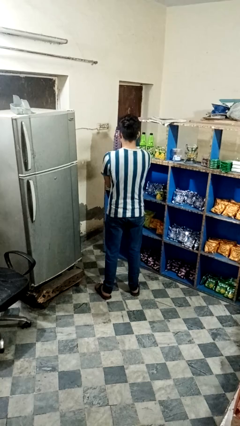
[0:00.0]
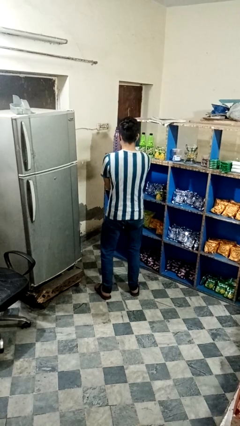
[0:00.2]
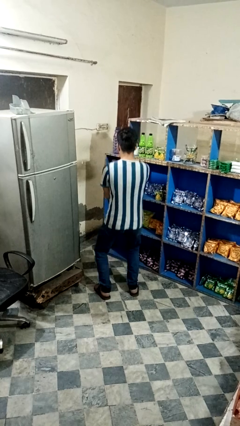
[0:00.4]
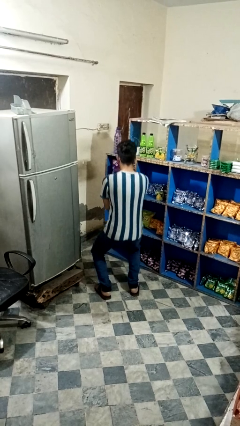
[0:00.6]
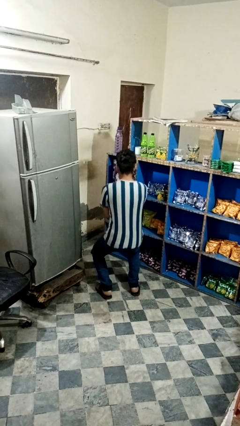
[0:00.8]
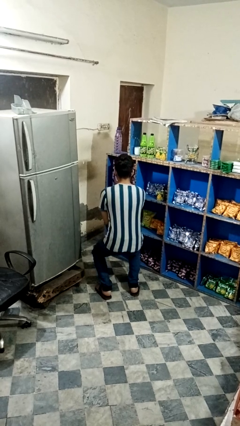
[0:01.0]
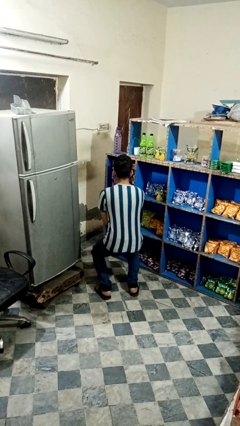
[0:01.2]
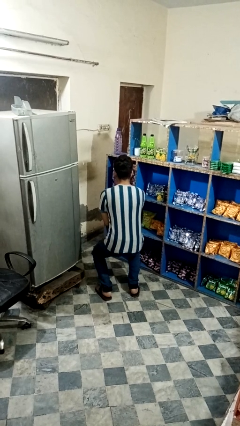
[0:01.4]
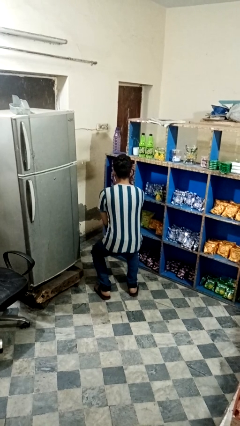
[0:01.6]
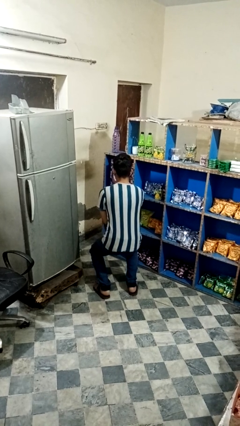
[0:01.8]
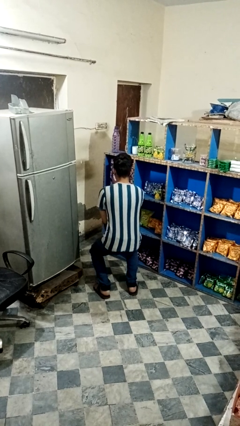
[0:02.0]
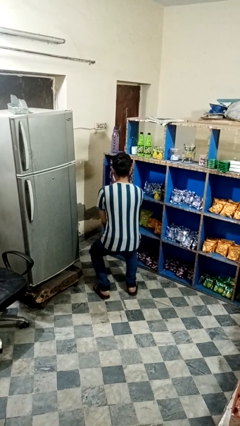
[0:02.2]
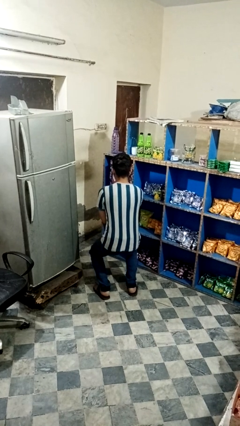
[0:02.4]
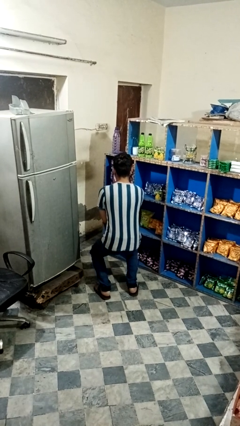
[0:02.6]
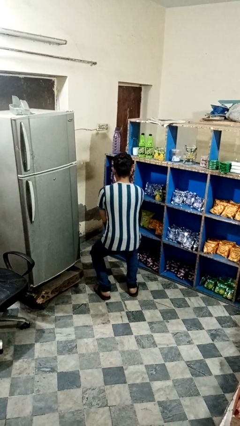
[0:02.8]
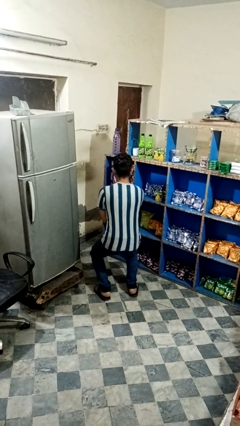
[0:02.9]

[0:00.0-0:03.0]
person squats

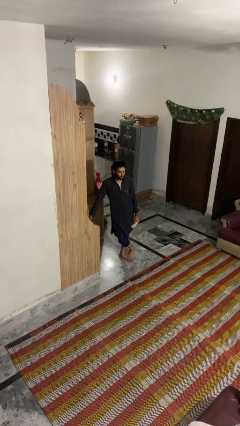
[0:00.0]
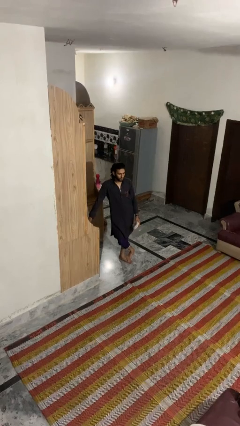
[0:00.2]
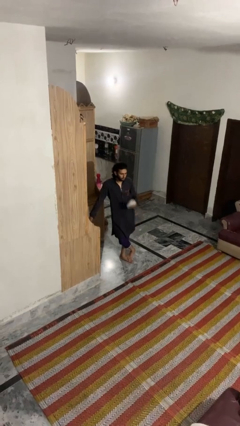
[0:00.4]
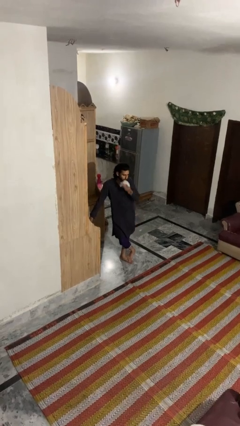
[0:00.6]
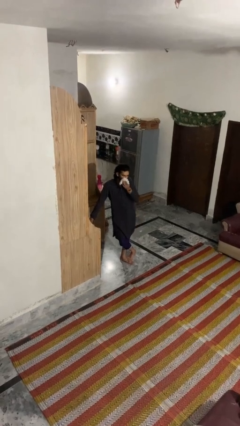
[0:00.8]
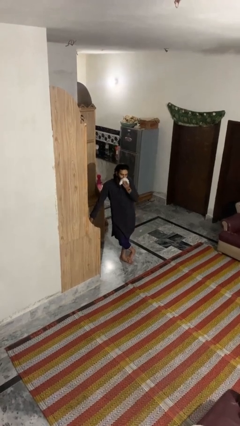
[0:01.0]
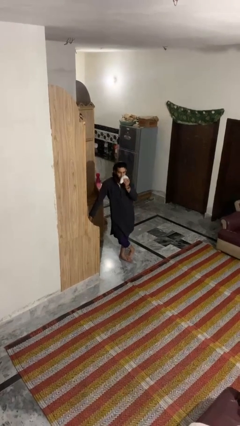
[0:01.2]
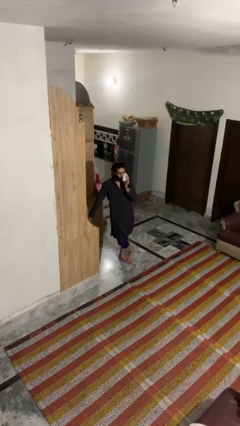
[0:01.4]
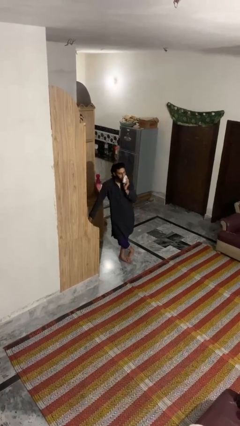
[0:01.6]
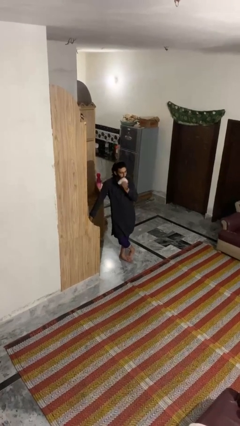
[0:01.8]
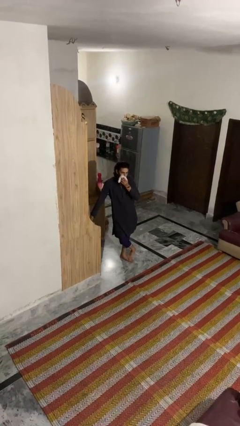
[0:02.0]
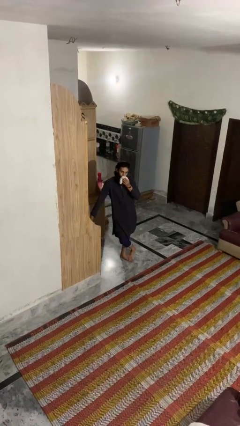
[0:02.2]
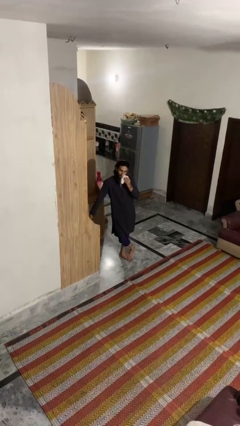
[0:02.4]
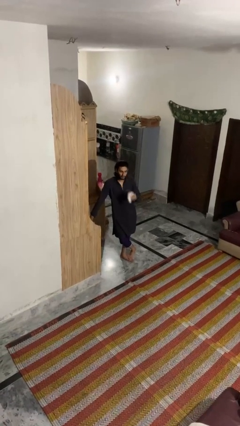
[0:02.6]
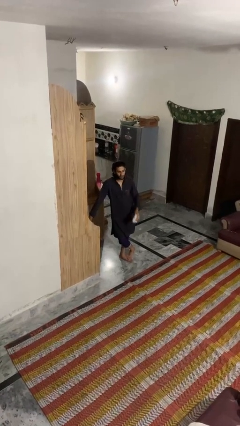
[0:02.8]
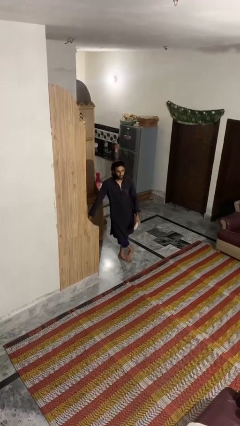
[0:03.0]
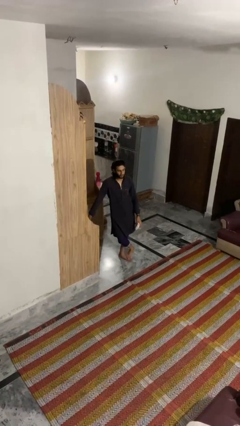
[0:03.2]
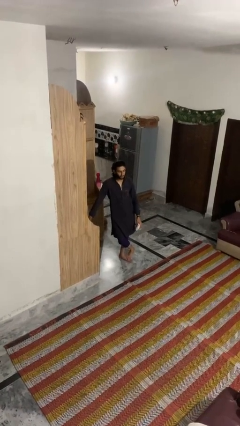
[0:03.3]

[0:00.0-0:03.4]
person wipes mouth with napkin

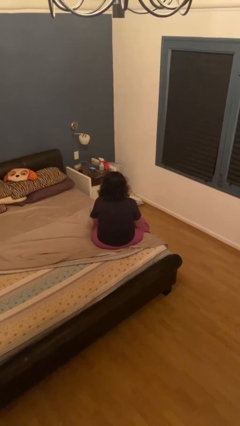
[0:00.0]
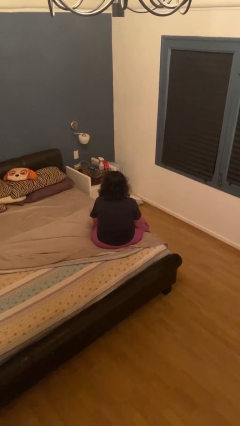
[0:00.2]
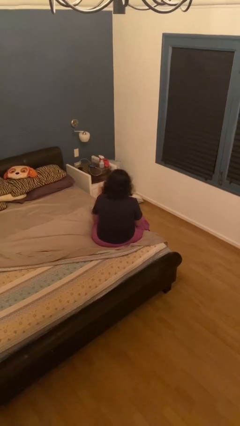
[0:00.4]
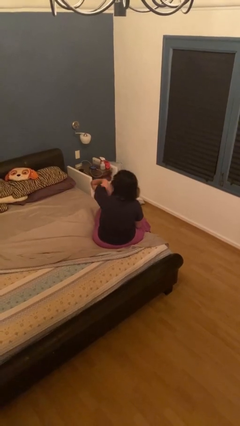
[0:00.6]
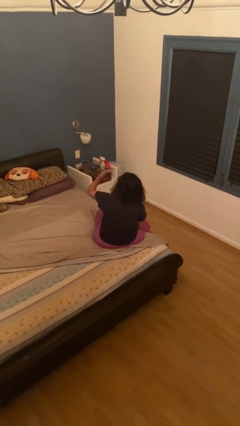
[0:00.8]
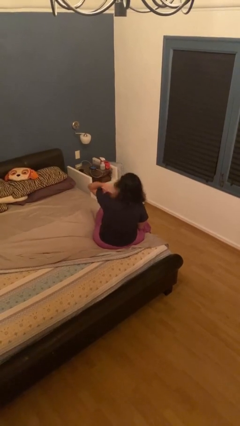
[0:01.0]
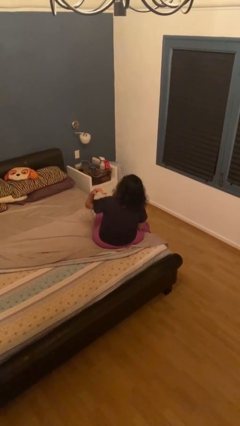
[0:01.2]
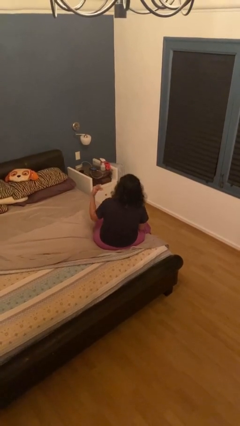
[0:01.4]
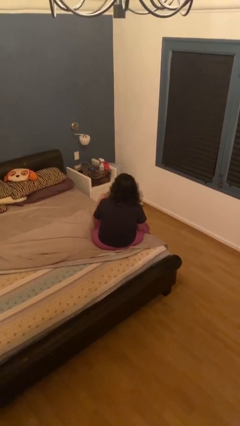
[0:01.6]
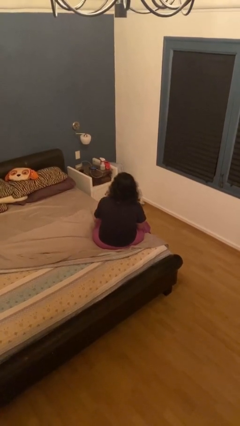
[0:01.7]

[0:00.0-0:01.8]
person swats bug

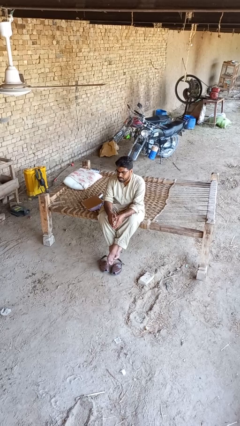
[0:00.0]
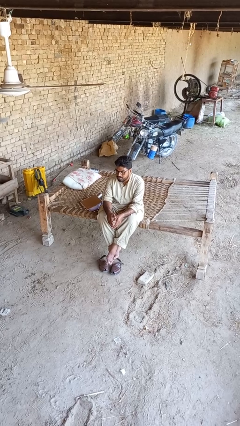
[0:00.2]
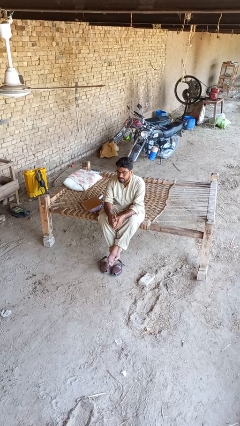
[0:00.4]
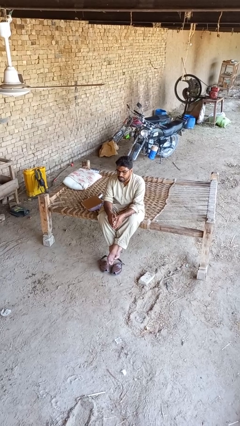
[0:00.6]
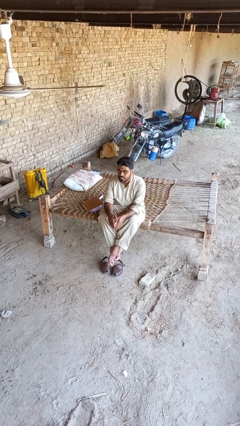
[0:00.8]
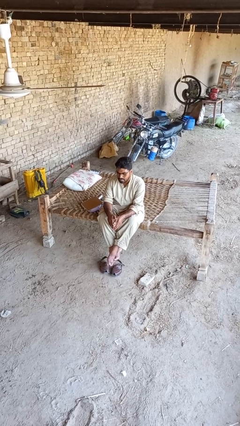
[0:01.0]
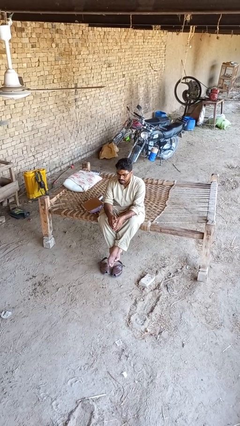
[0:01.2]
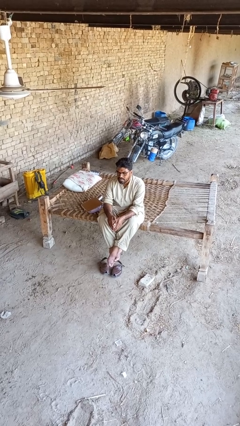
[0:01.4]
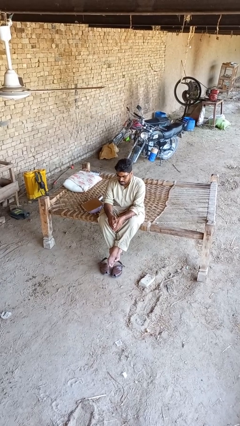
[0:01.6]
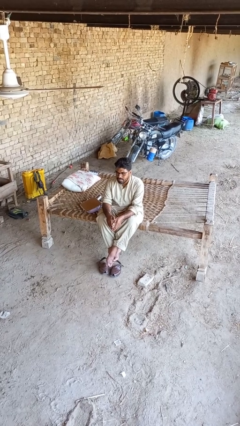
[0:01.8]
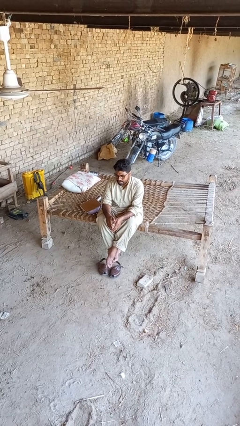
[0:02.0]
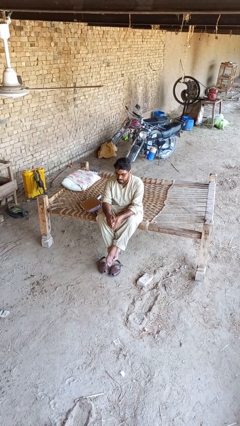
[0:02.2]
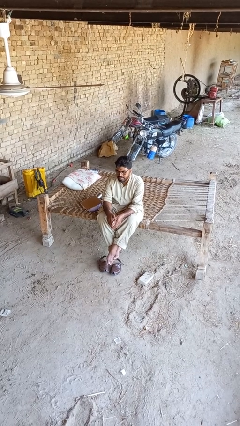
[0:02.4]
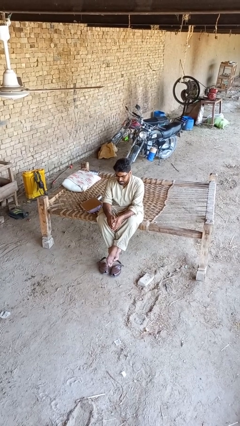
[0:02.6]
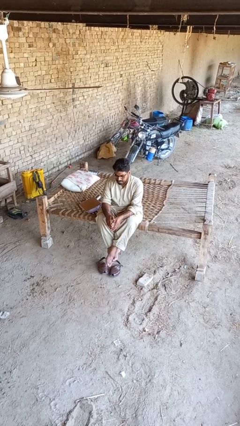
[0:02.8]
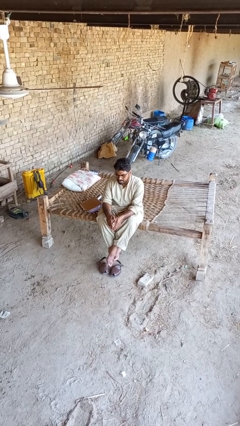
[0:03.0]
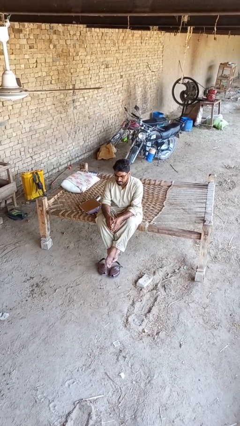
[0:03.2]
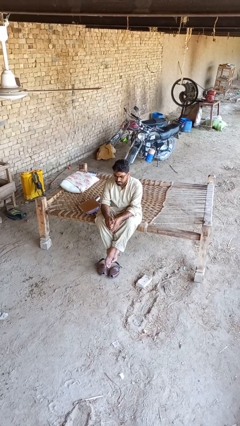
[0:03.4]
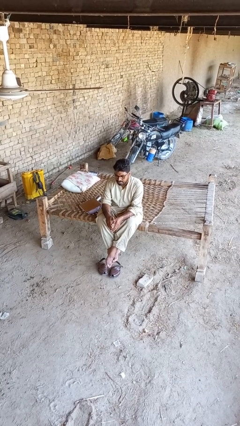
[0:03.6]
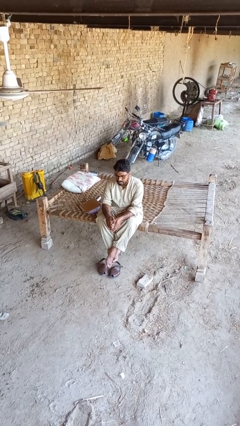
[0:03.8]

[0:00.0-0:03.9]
person nods head

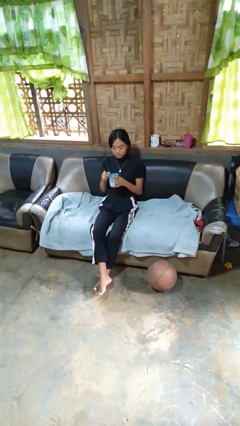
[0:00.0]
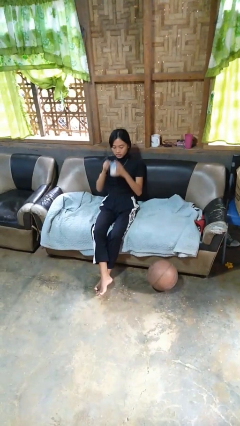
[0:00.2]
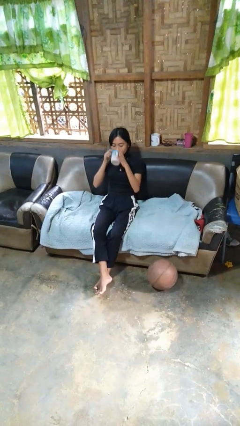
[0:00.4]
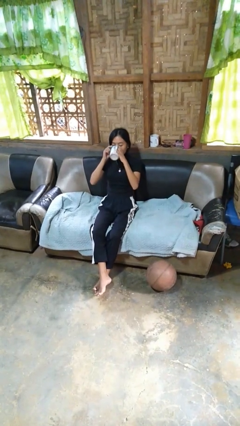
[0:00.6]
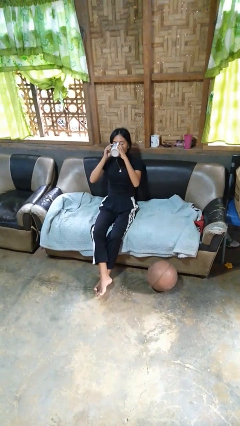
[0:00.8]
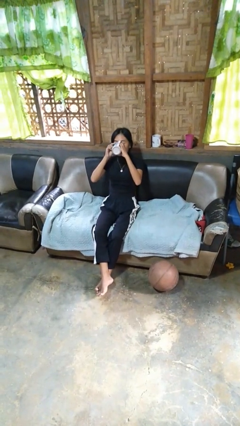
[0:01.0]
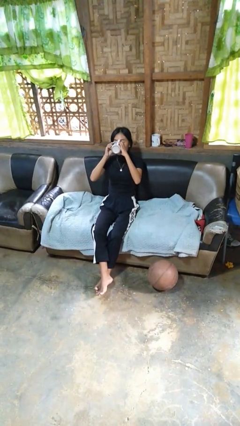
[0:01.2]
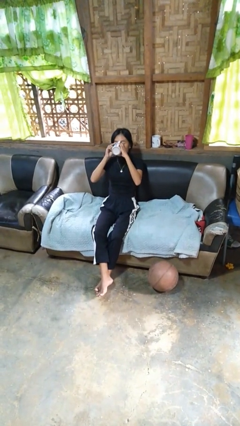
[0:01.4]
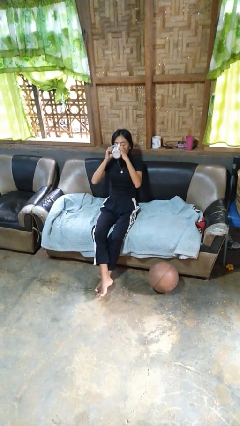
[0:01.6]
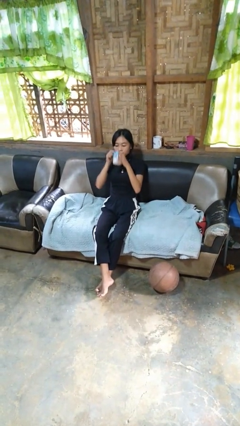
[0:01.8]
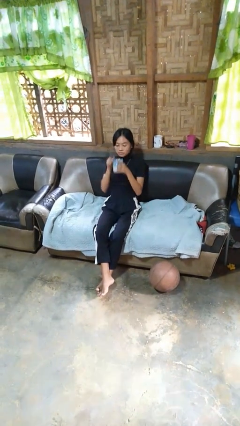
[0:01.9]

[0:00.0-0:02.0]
person drinks from mug

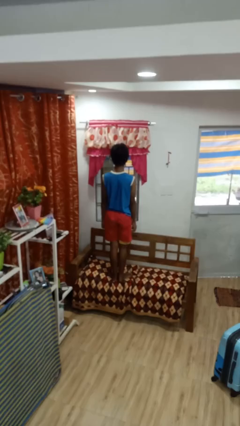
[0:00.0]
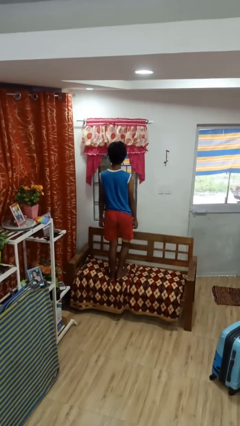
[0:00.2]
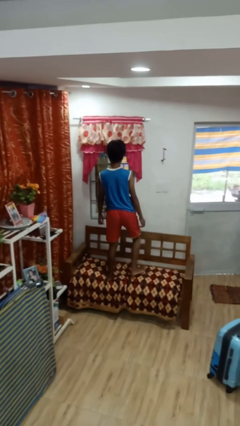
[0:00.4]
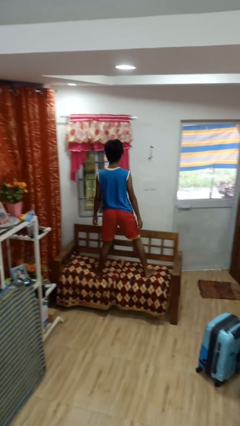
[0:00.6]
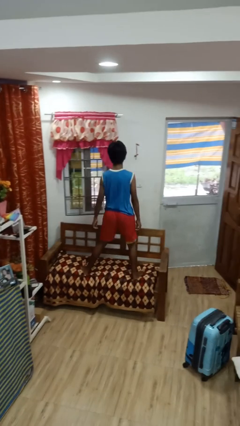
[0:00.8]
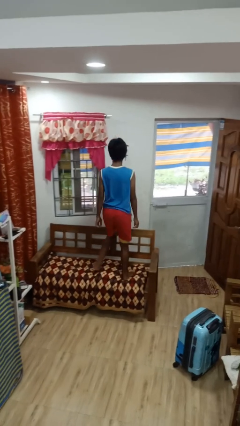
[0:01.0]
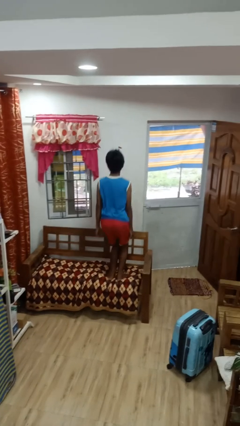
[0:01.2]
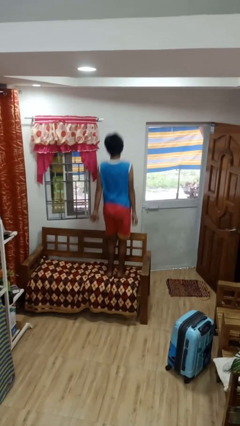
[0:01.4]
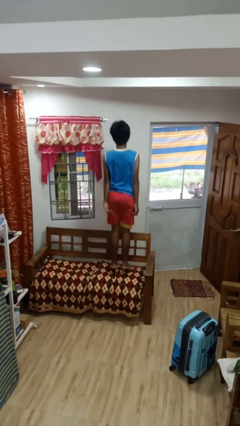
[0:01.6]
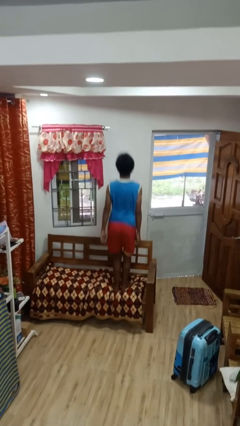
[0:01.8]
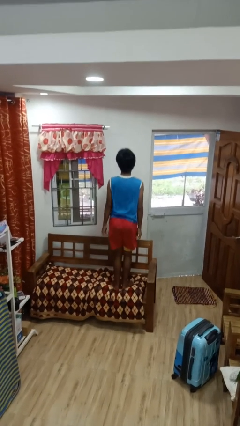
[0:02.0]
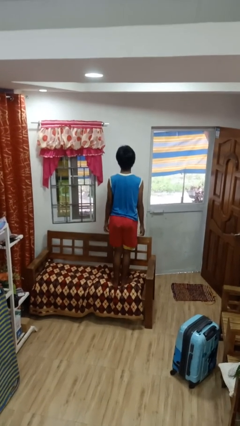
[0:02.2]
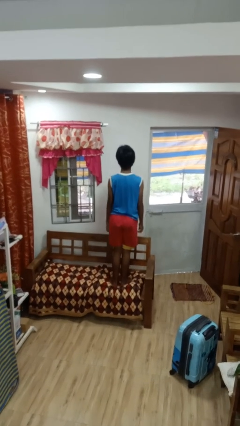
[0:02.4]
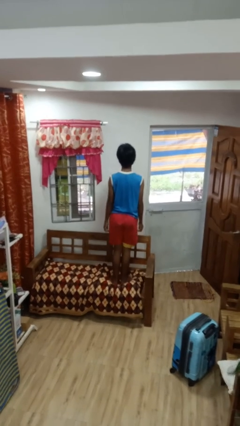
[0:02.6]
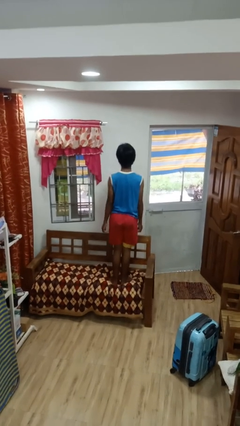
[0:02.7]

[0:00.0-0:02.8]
person jumps on couch

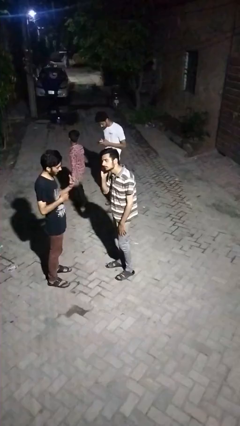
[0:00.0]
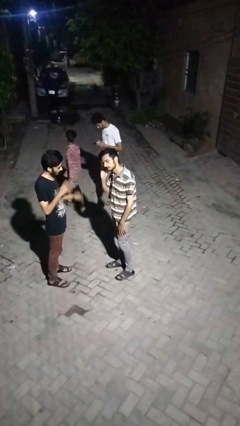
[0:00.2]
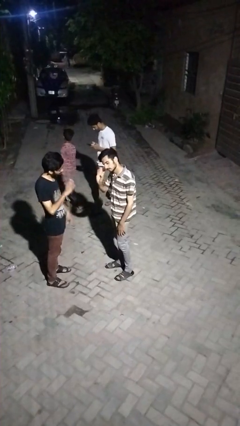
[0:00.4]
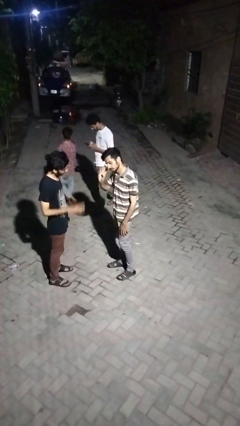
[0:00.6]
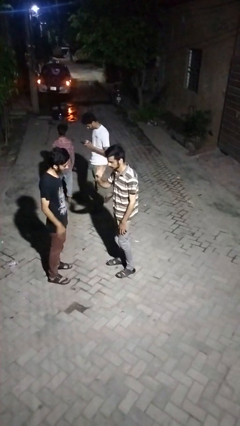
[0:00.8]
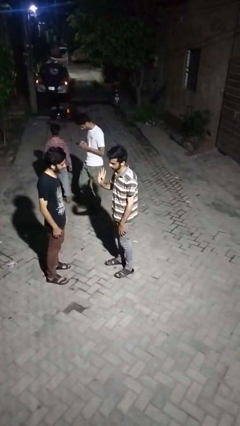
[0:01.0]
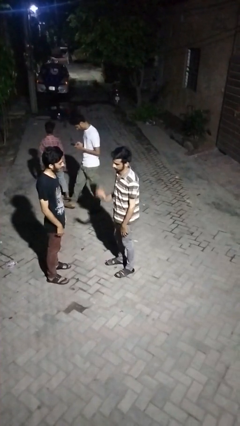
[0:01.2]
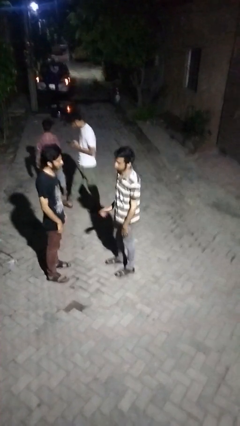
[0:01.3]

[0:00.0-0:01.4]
person talks to person
